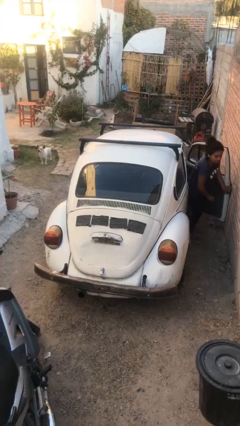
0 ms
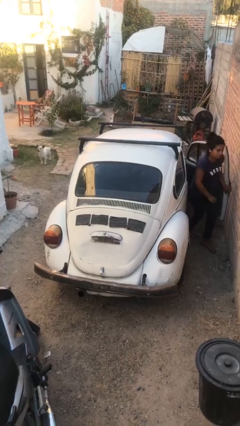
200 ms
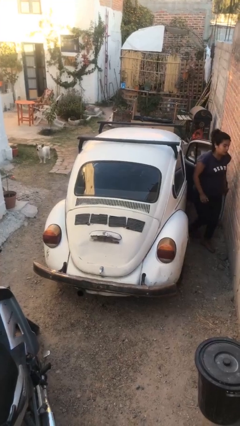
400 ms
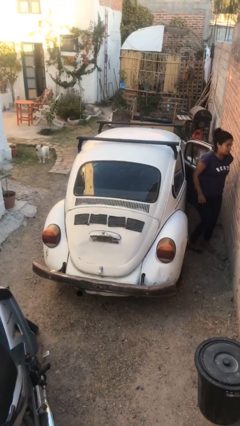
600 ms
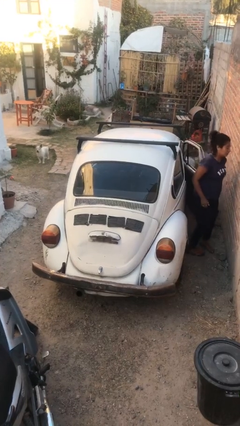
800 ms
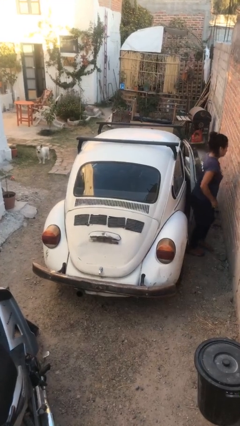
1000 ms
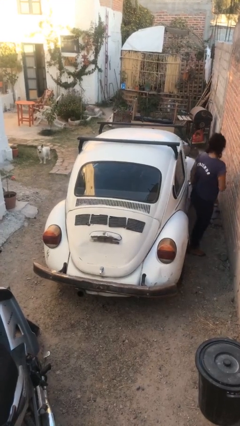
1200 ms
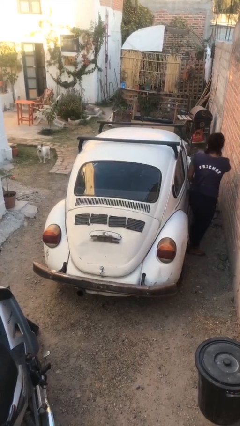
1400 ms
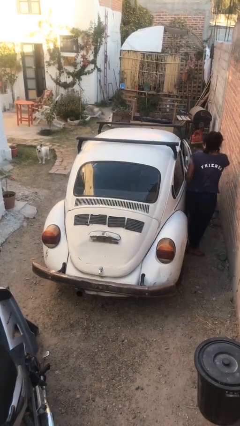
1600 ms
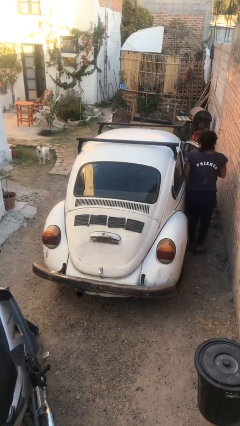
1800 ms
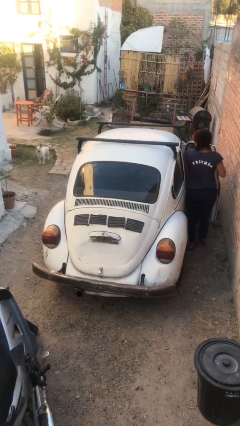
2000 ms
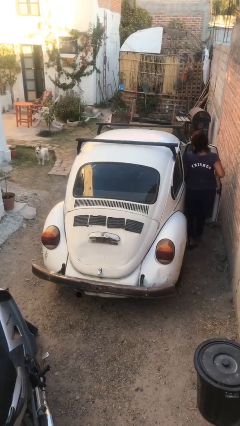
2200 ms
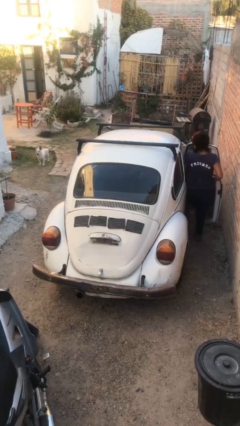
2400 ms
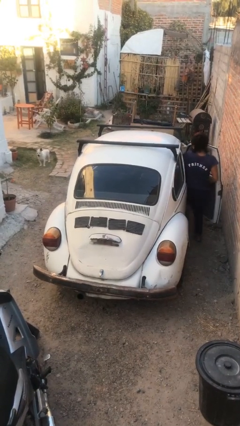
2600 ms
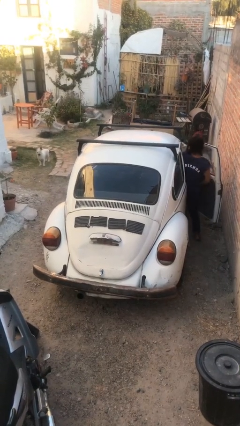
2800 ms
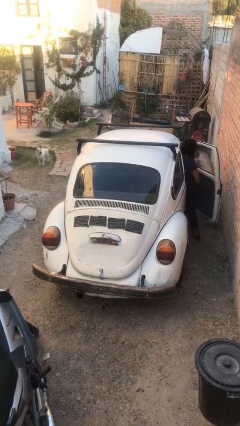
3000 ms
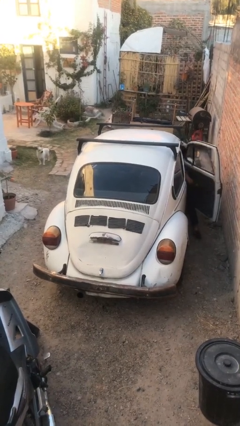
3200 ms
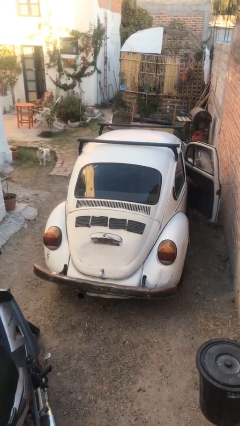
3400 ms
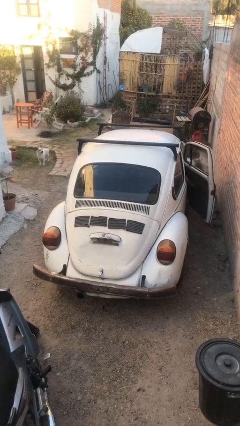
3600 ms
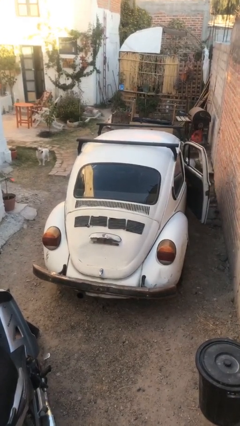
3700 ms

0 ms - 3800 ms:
car picks up person

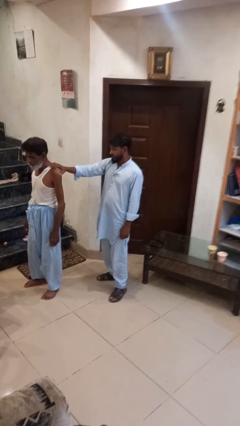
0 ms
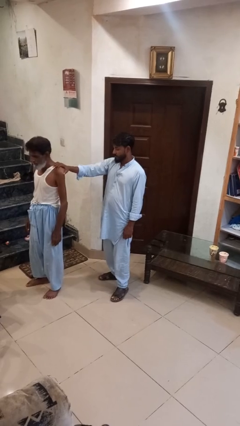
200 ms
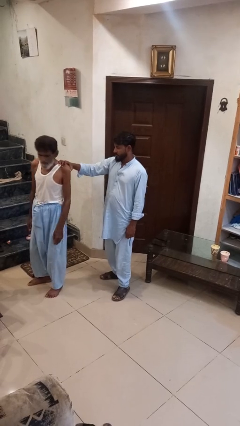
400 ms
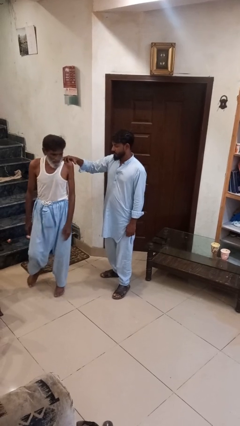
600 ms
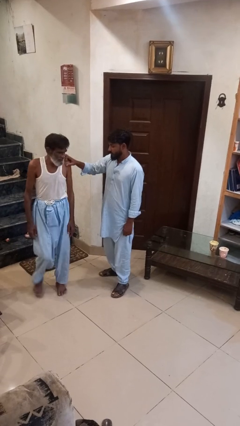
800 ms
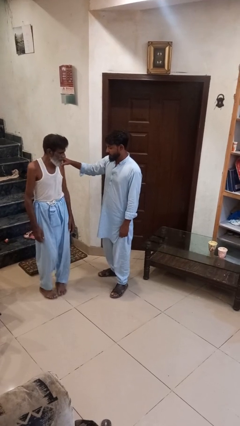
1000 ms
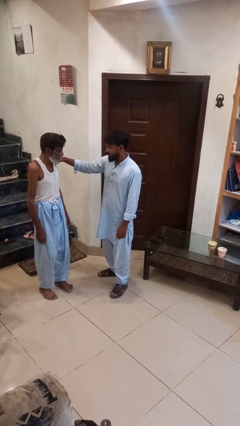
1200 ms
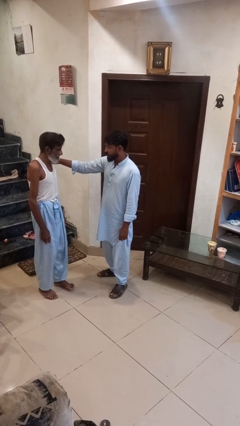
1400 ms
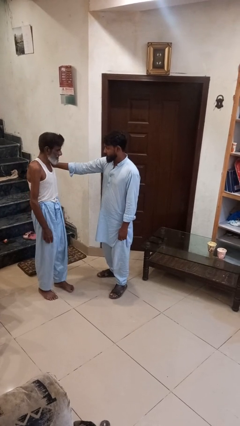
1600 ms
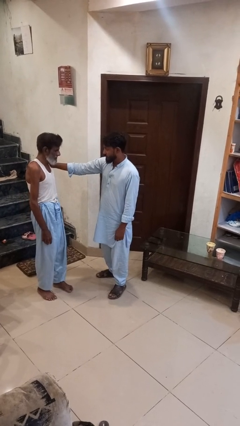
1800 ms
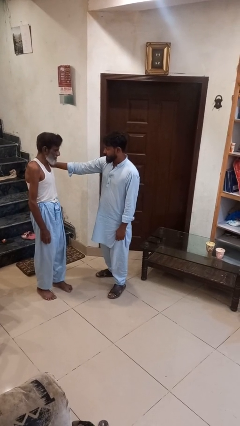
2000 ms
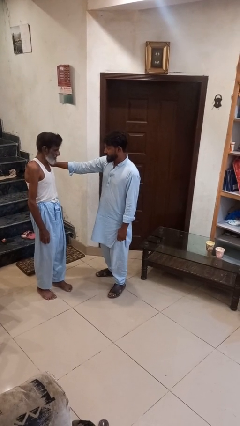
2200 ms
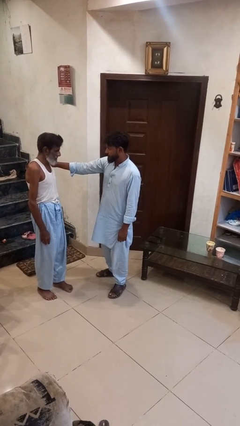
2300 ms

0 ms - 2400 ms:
person spins person around

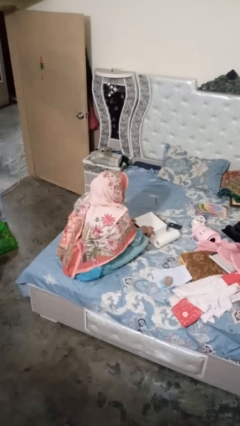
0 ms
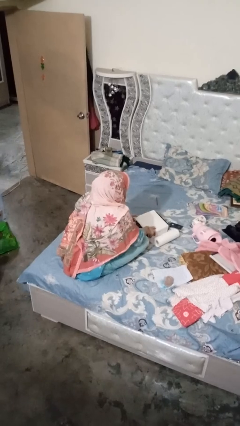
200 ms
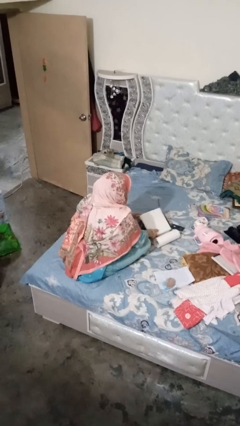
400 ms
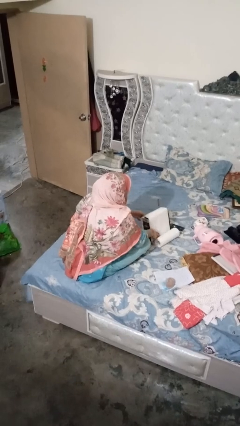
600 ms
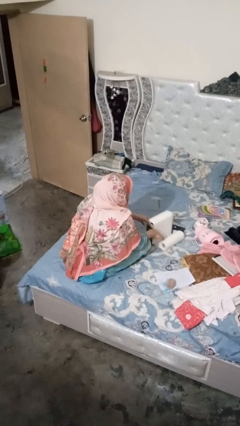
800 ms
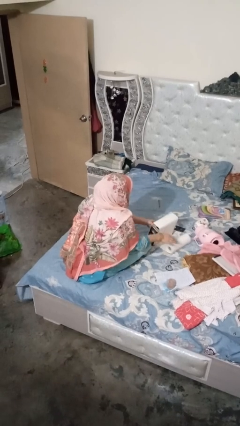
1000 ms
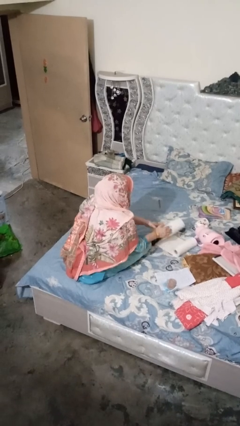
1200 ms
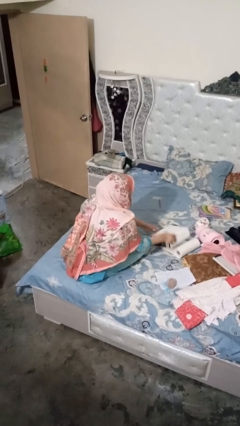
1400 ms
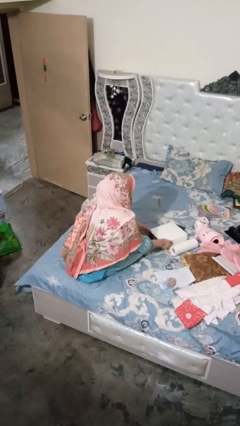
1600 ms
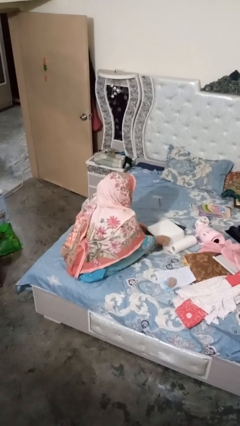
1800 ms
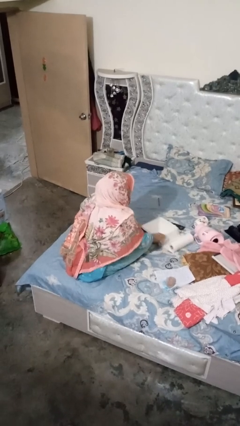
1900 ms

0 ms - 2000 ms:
person wraps box

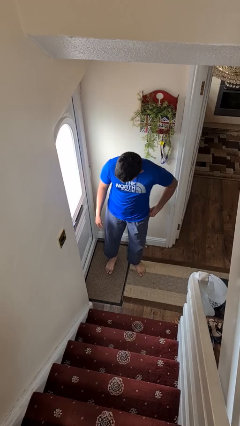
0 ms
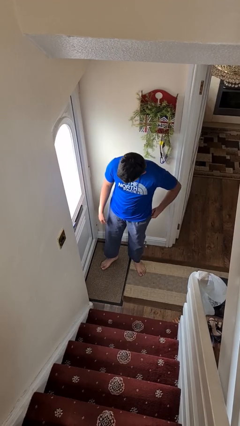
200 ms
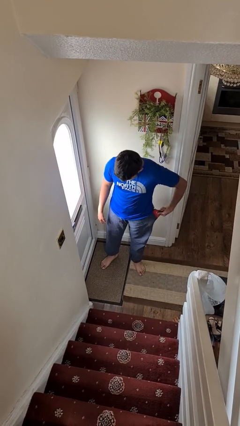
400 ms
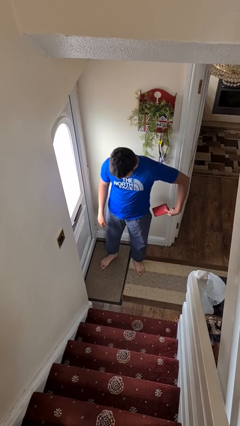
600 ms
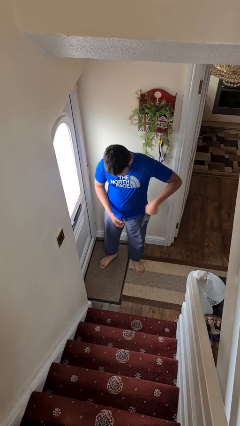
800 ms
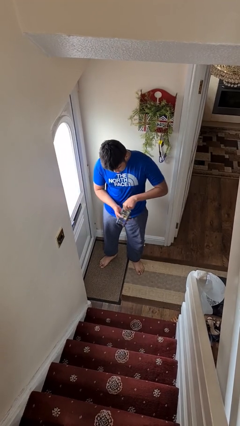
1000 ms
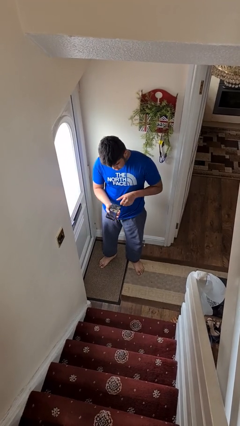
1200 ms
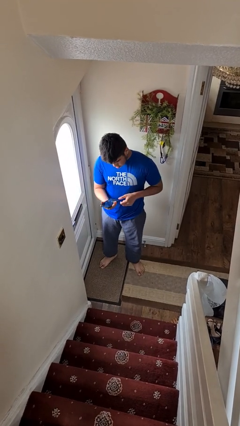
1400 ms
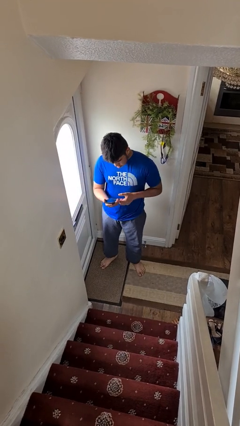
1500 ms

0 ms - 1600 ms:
person takes phone from pocket

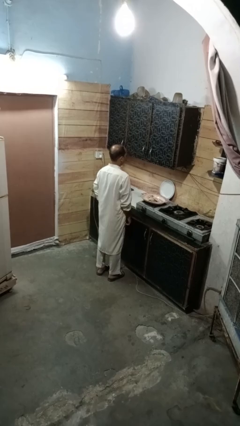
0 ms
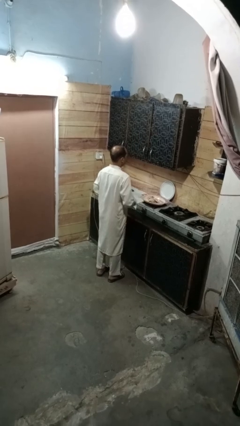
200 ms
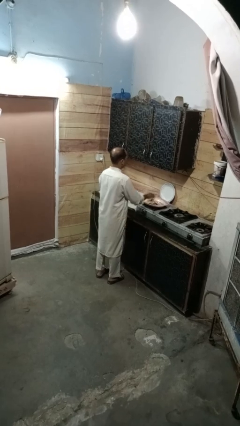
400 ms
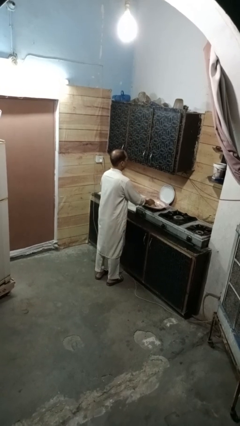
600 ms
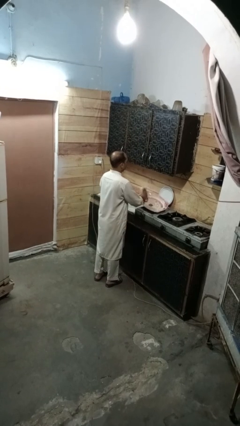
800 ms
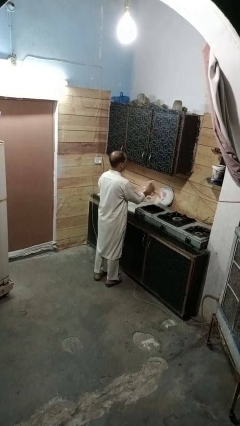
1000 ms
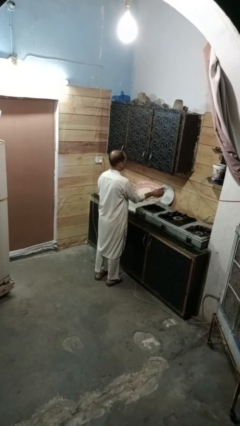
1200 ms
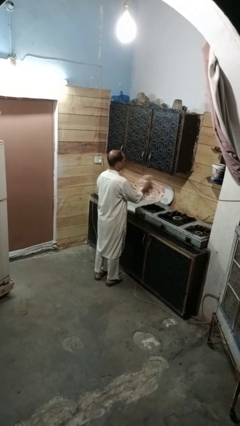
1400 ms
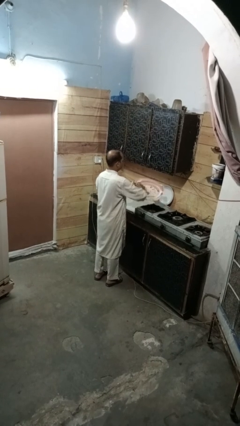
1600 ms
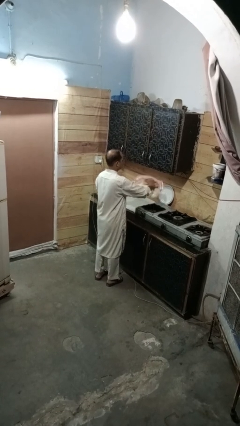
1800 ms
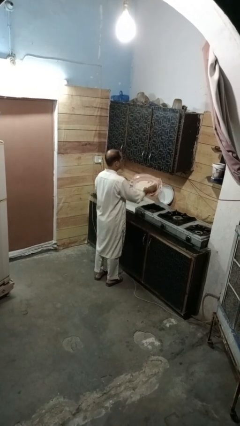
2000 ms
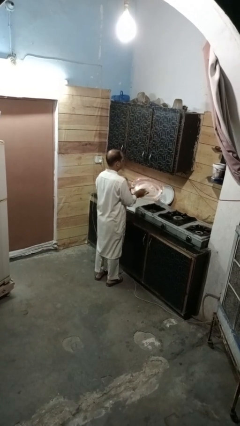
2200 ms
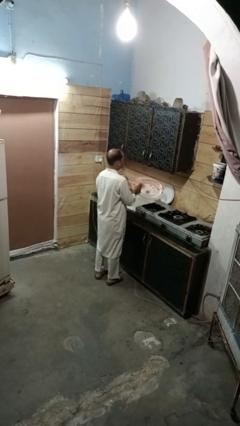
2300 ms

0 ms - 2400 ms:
person dries dish

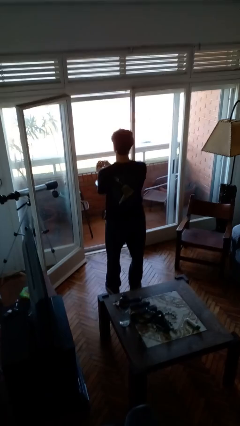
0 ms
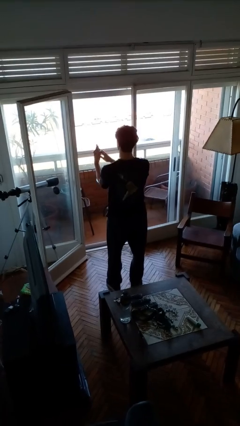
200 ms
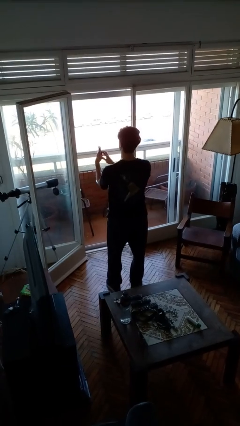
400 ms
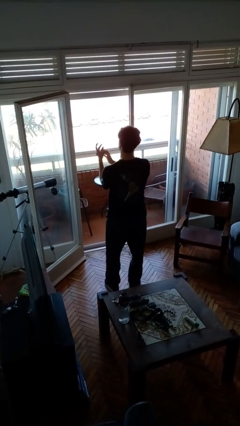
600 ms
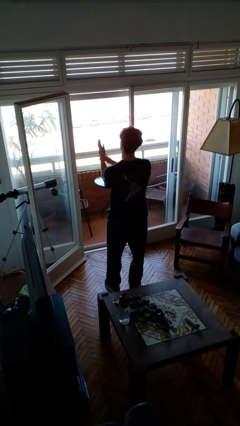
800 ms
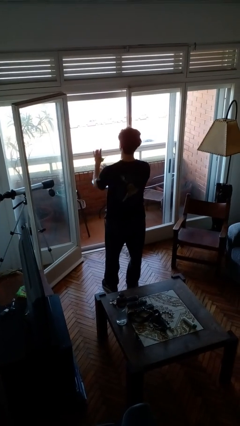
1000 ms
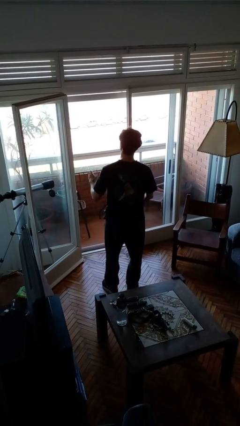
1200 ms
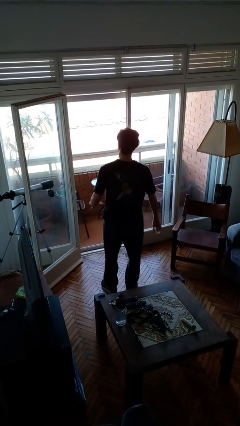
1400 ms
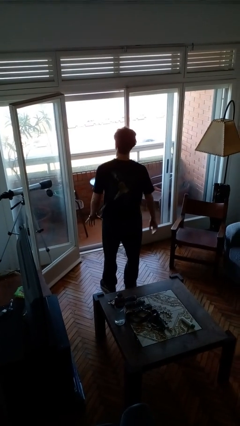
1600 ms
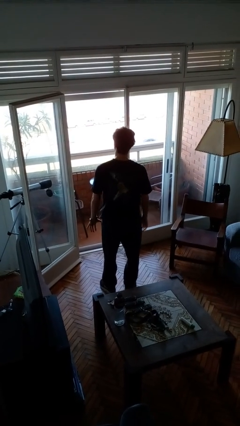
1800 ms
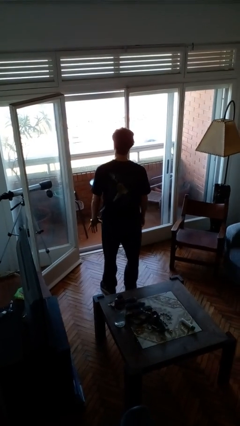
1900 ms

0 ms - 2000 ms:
person puts on wristwatch

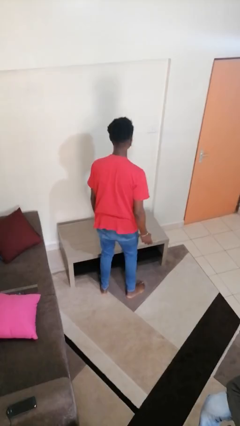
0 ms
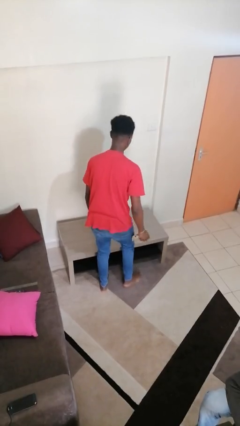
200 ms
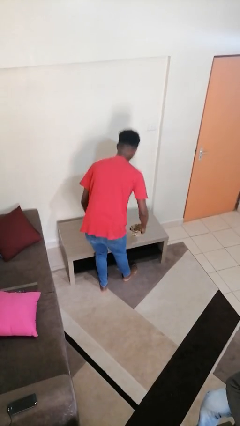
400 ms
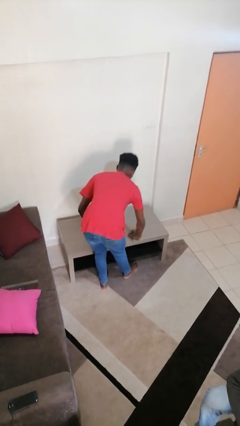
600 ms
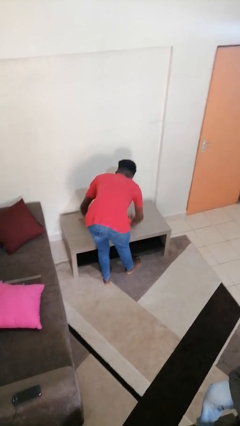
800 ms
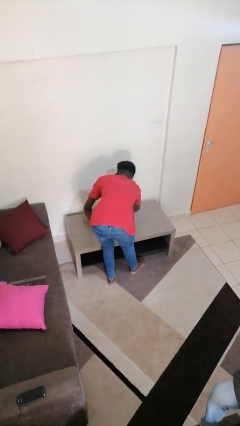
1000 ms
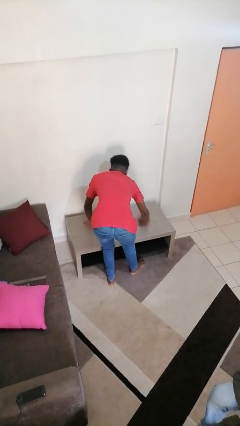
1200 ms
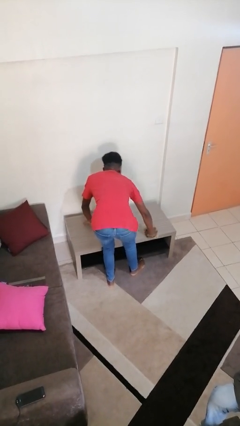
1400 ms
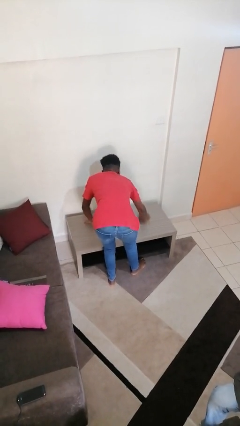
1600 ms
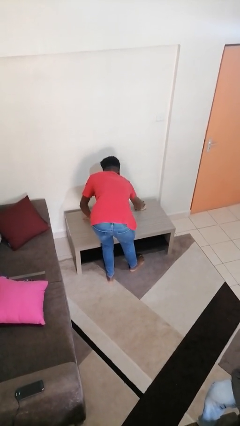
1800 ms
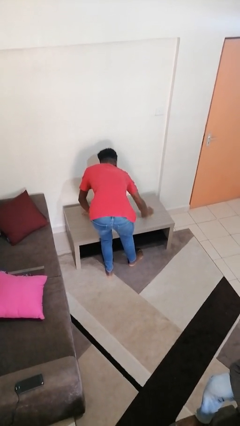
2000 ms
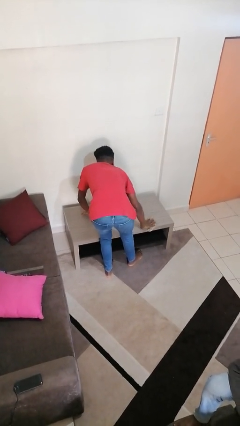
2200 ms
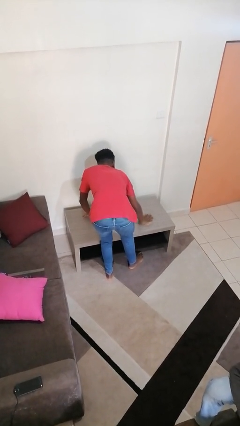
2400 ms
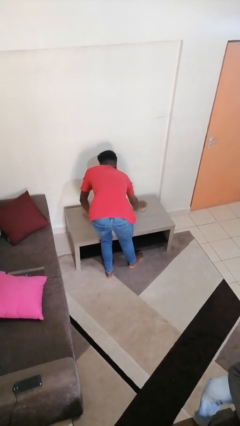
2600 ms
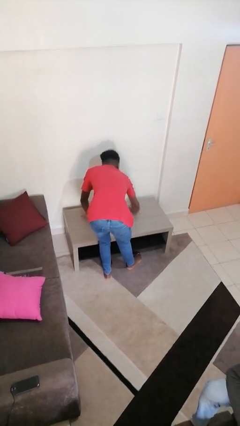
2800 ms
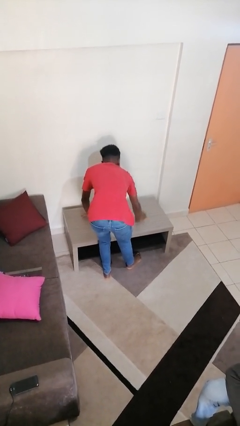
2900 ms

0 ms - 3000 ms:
person cleans table with rag
